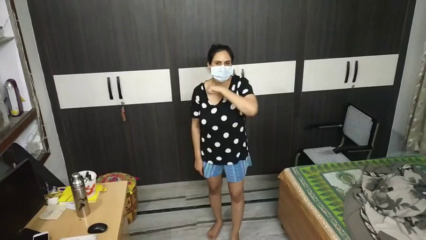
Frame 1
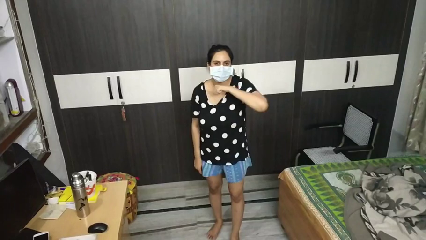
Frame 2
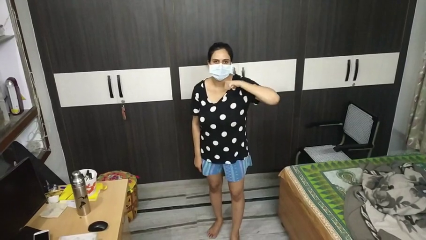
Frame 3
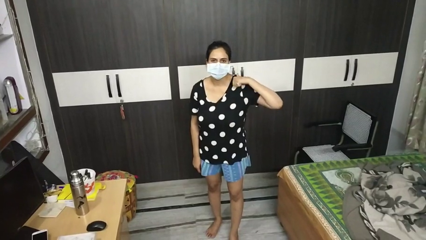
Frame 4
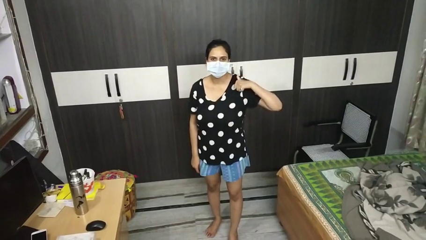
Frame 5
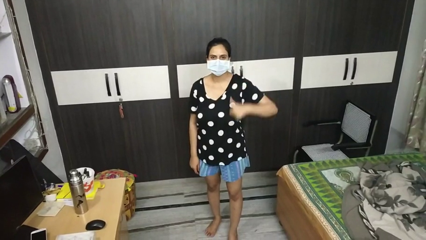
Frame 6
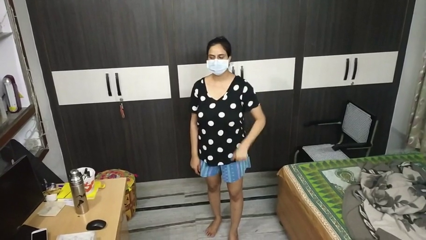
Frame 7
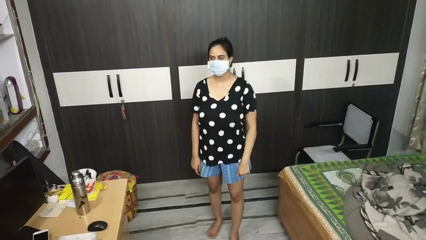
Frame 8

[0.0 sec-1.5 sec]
person gestures cut

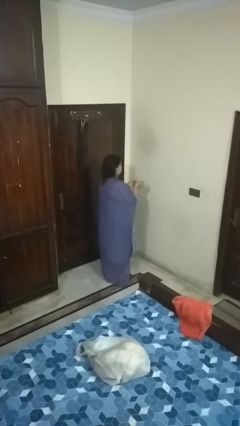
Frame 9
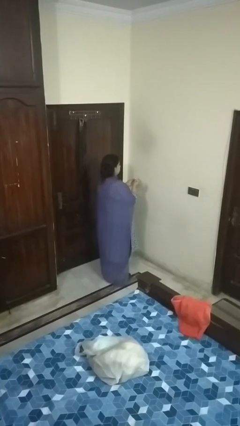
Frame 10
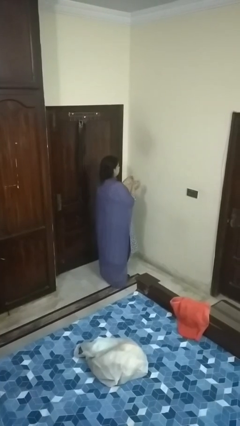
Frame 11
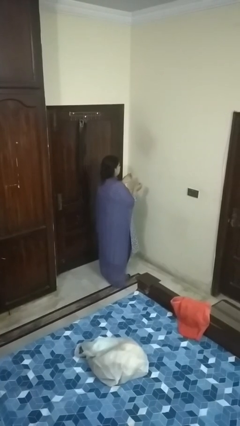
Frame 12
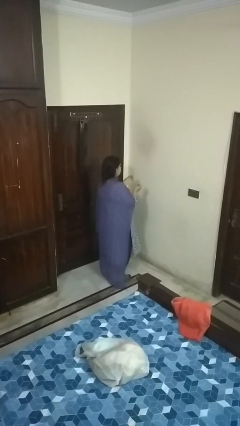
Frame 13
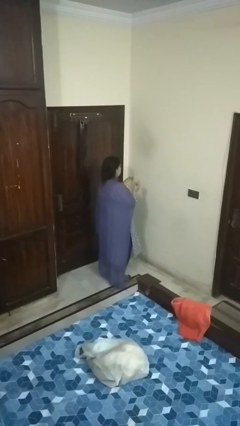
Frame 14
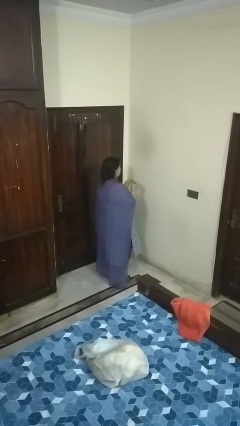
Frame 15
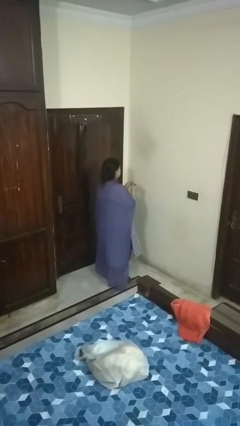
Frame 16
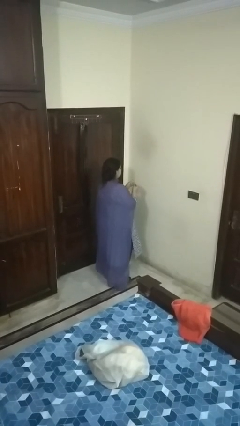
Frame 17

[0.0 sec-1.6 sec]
person takes off ring

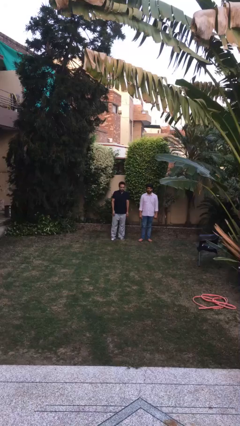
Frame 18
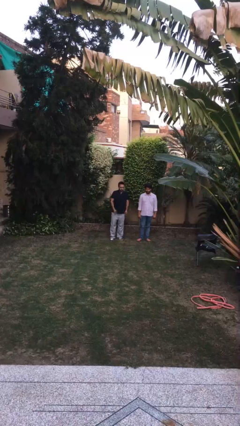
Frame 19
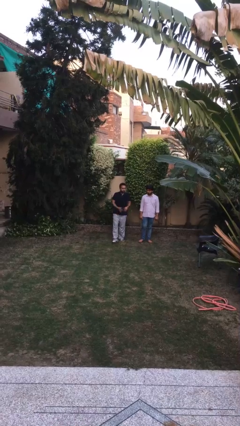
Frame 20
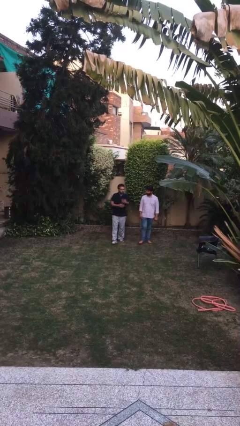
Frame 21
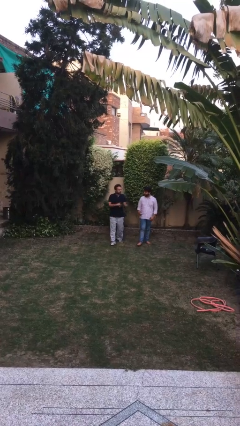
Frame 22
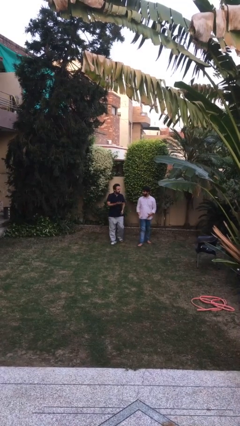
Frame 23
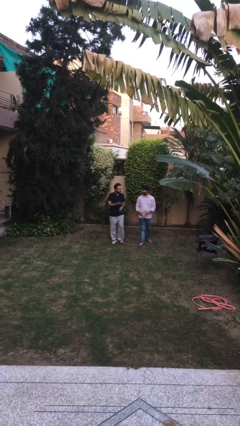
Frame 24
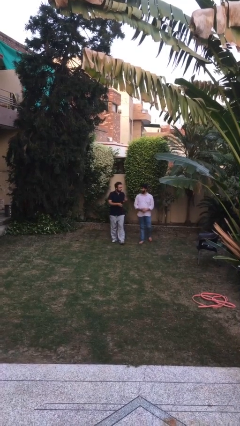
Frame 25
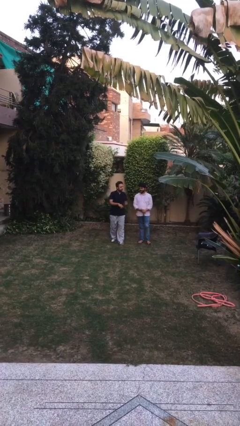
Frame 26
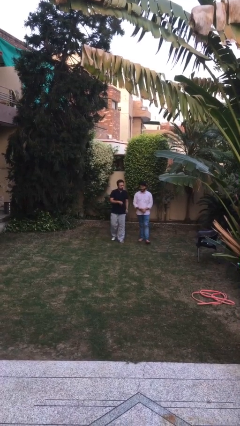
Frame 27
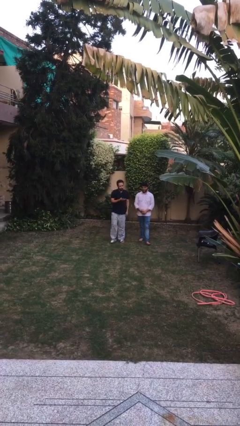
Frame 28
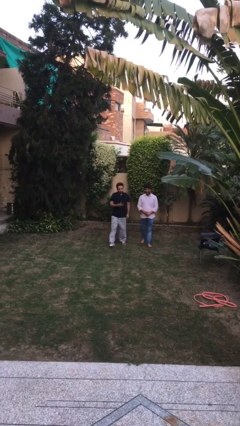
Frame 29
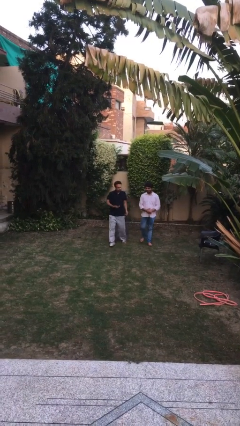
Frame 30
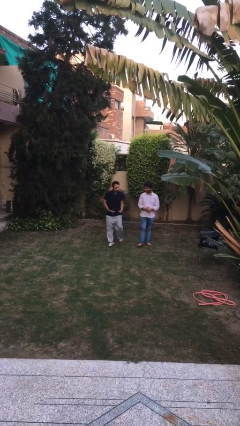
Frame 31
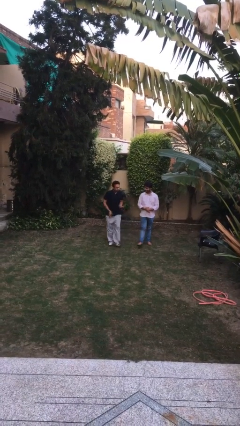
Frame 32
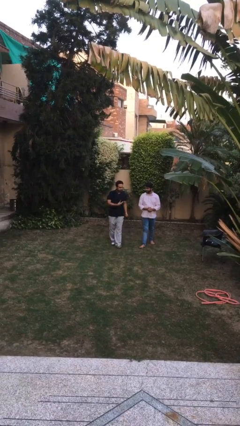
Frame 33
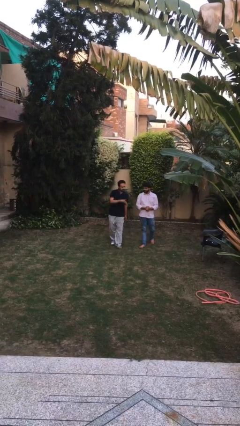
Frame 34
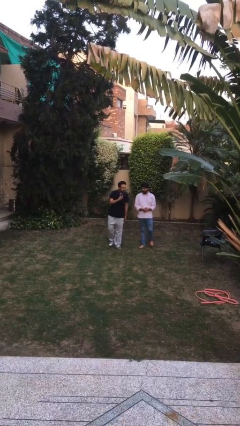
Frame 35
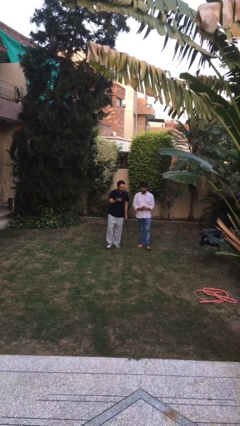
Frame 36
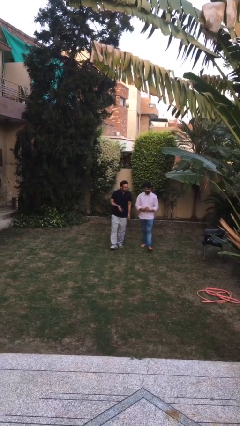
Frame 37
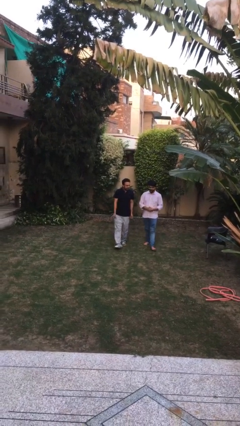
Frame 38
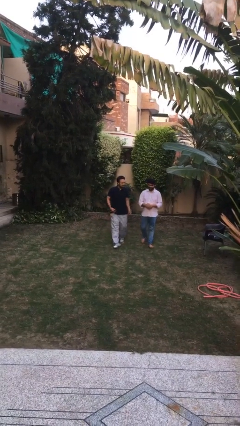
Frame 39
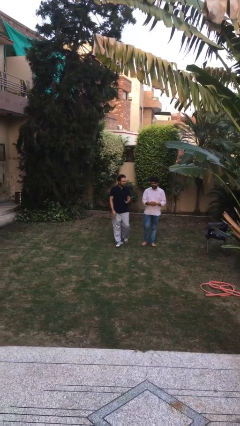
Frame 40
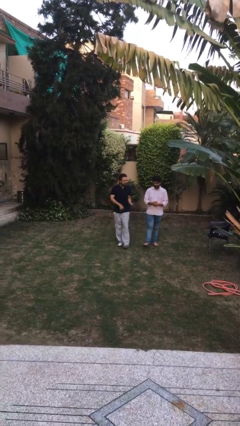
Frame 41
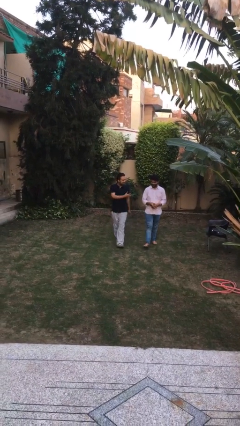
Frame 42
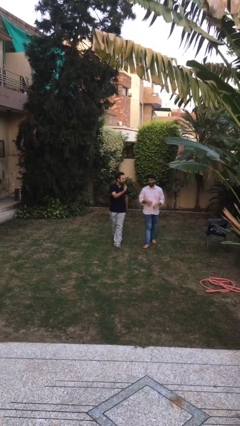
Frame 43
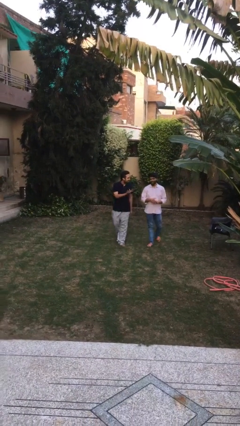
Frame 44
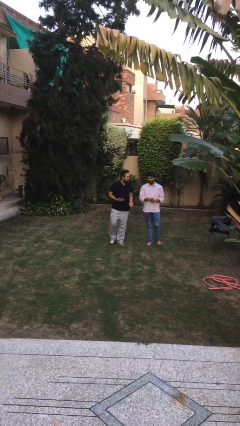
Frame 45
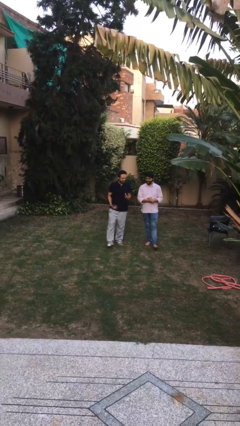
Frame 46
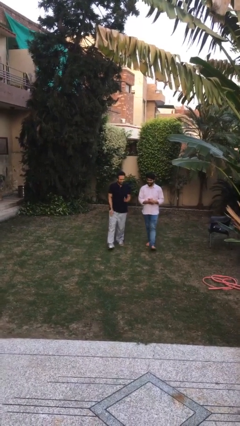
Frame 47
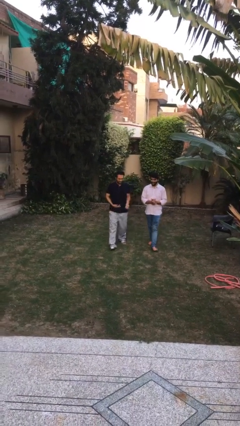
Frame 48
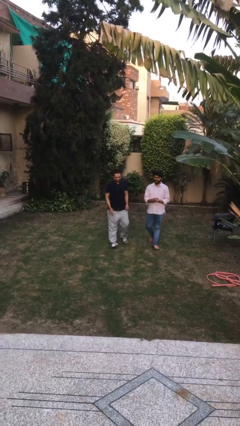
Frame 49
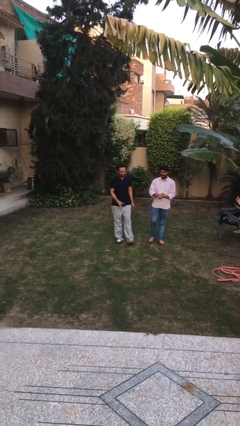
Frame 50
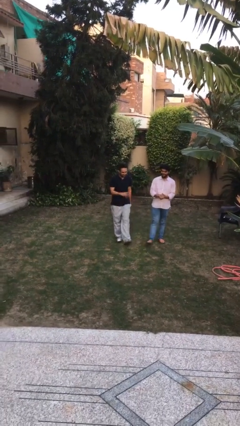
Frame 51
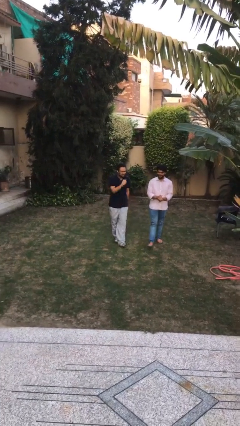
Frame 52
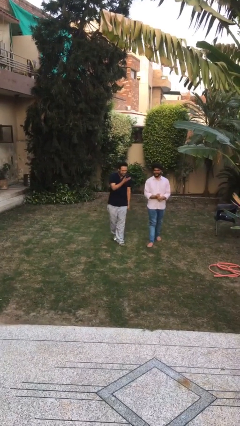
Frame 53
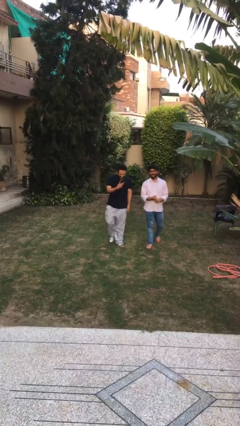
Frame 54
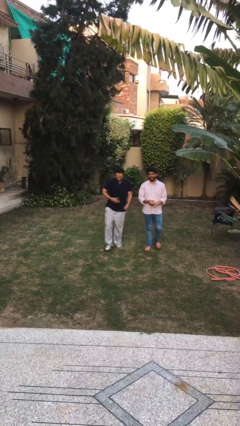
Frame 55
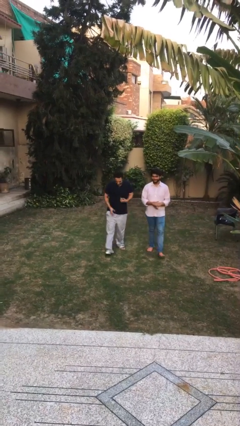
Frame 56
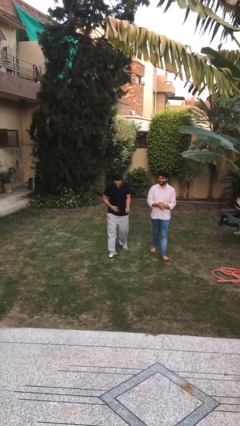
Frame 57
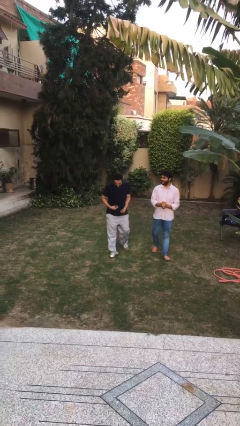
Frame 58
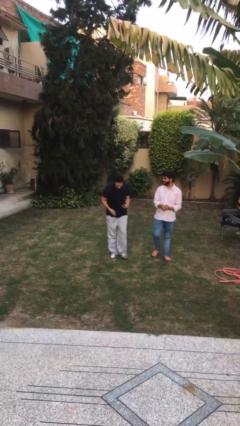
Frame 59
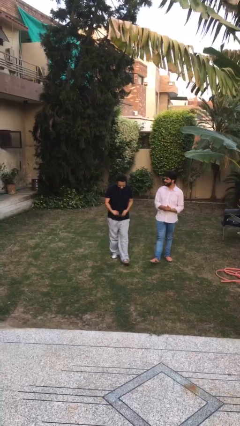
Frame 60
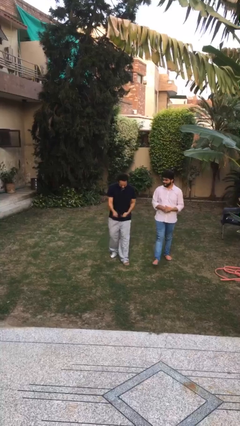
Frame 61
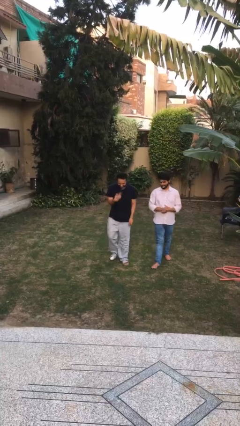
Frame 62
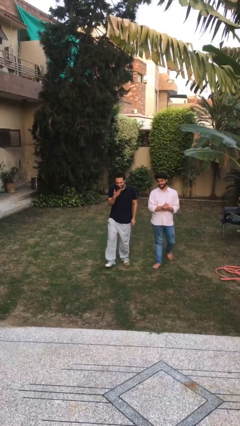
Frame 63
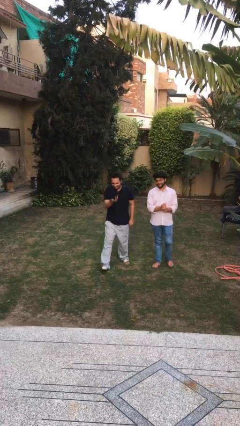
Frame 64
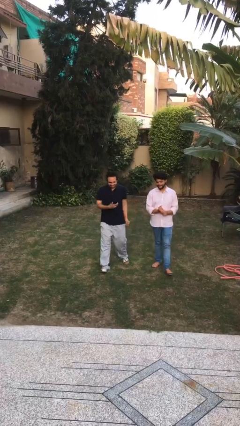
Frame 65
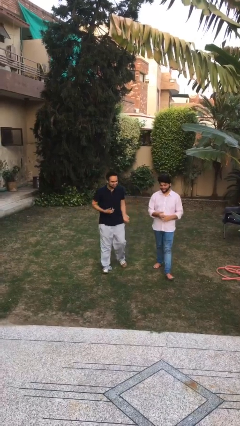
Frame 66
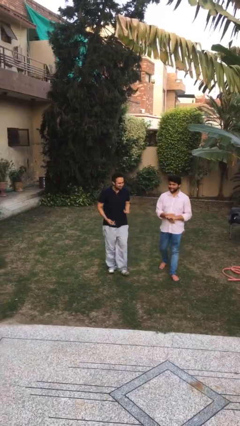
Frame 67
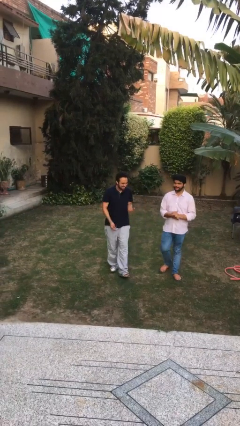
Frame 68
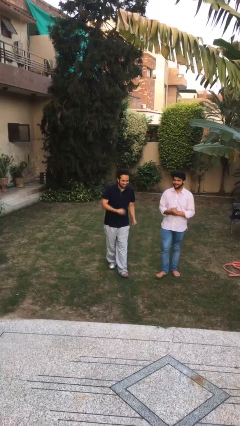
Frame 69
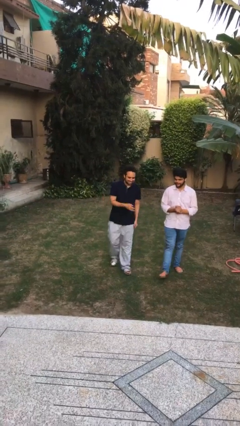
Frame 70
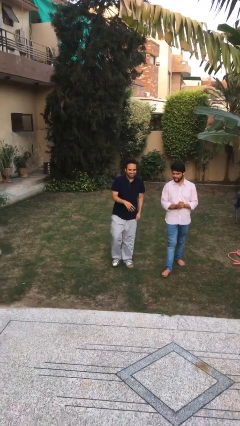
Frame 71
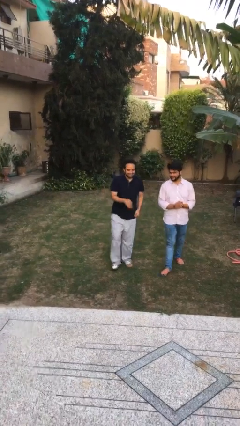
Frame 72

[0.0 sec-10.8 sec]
person talks to person

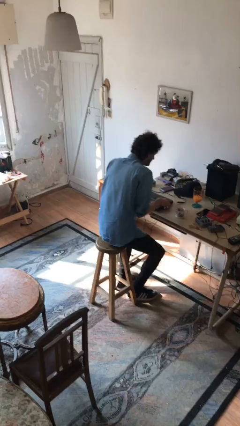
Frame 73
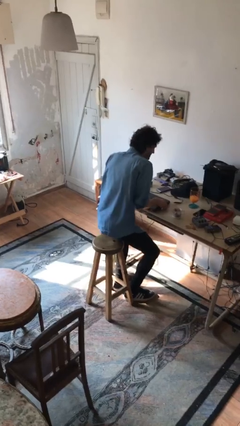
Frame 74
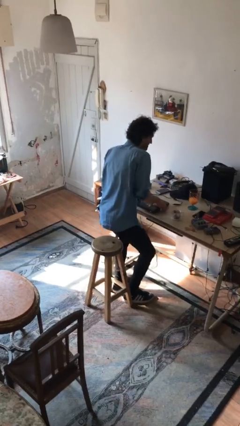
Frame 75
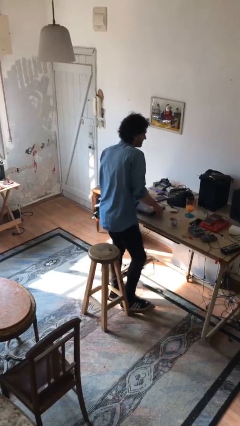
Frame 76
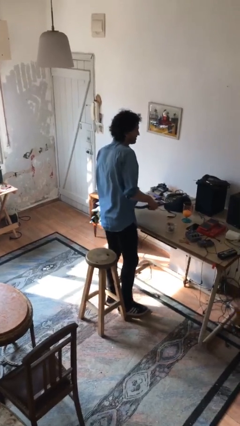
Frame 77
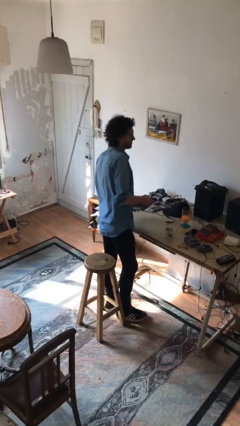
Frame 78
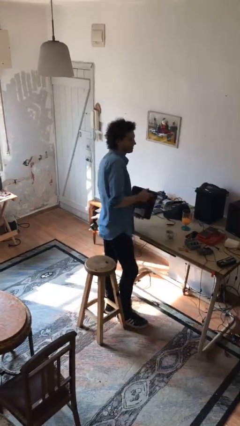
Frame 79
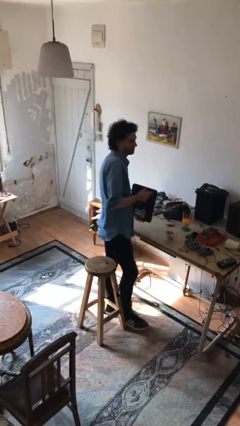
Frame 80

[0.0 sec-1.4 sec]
person stands up

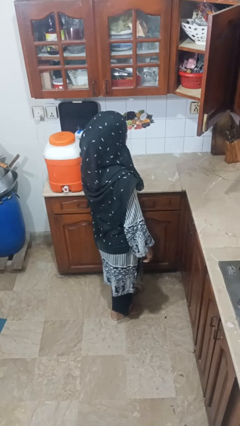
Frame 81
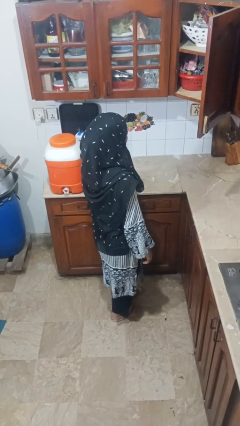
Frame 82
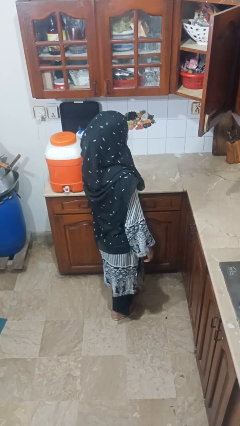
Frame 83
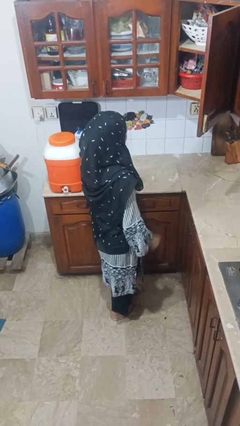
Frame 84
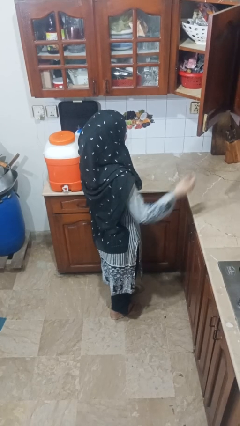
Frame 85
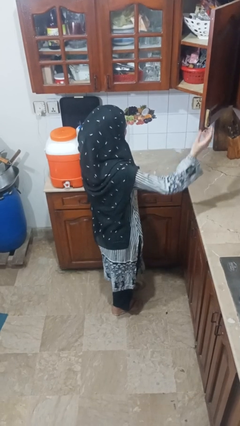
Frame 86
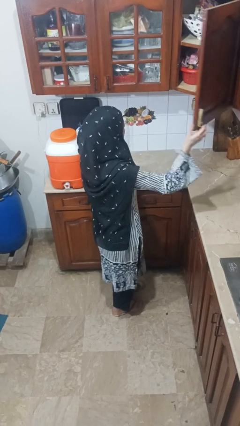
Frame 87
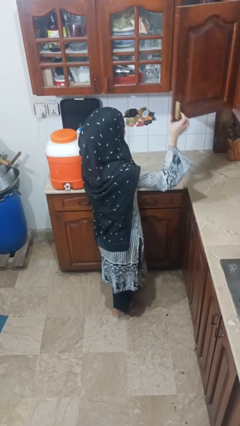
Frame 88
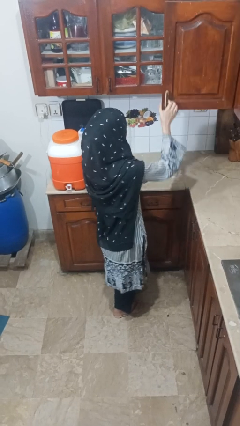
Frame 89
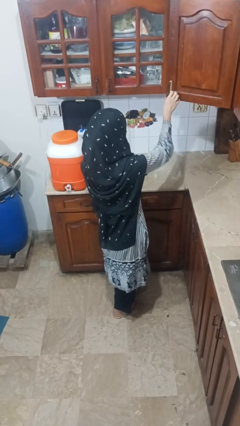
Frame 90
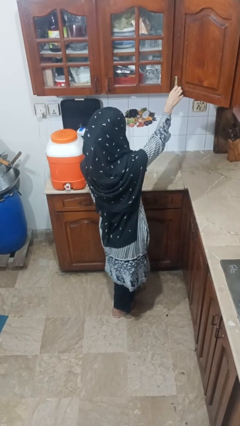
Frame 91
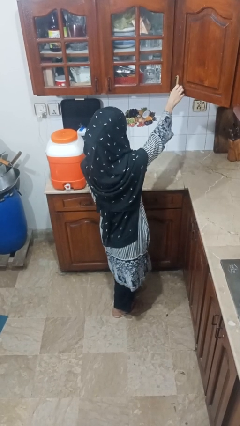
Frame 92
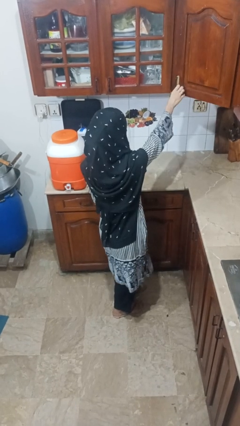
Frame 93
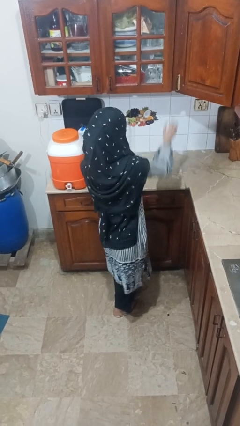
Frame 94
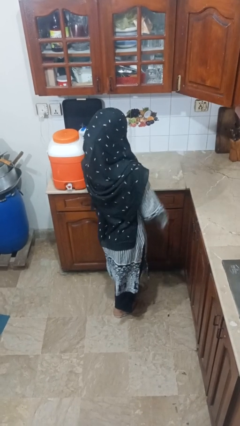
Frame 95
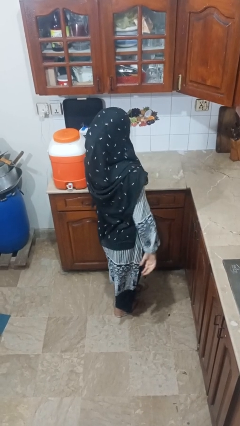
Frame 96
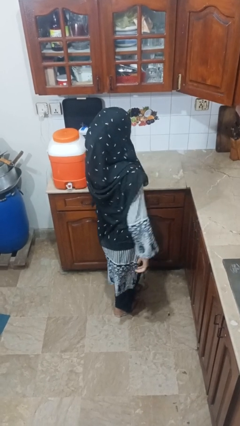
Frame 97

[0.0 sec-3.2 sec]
person closes cabinet
